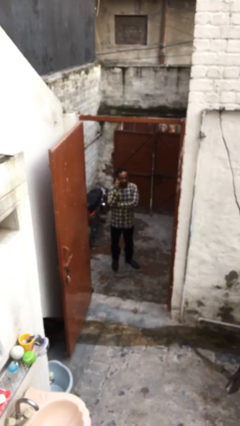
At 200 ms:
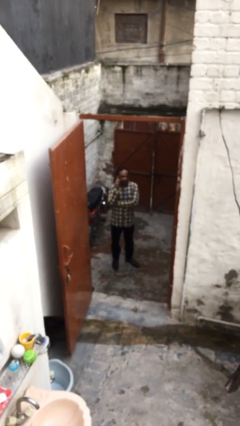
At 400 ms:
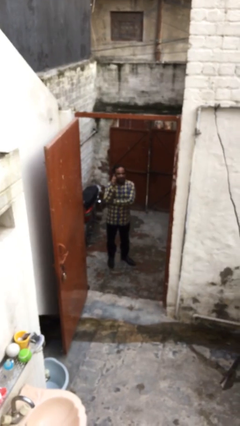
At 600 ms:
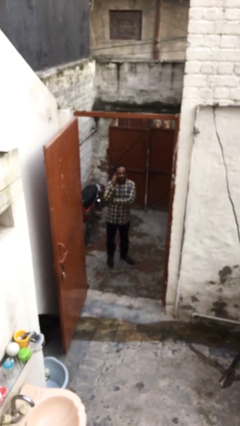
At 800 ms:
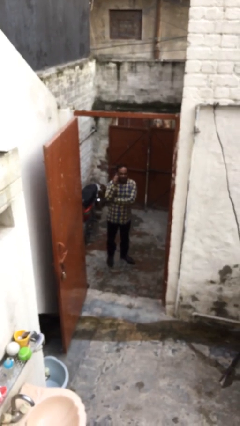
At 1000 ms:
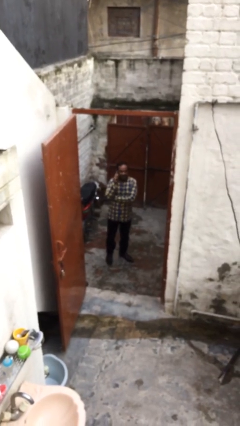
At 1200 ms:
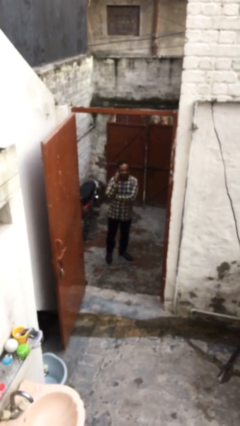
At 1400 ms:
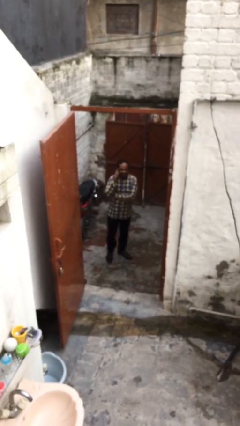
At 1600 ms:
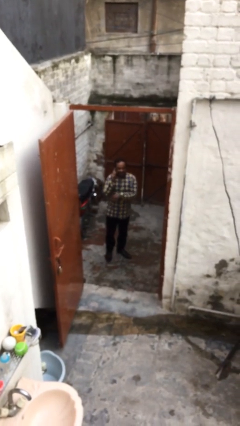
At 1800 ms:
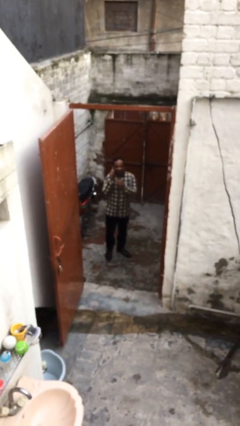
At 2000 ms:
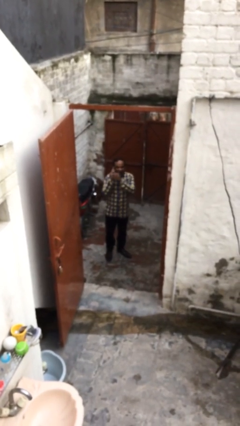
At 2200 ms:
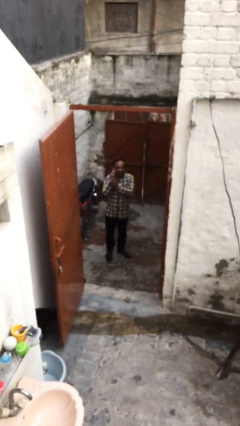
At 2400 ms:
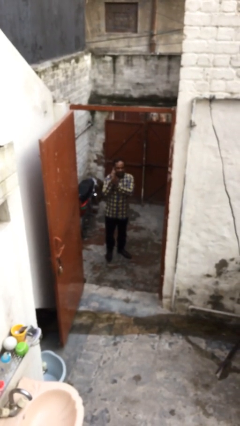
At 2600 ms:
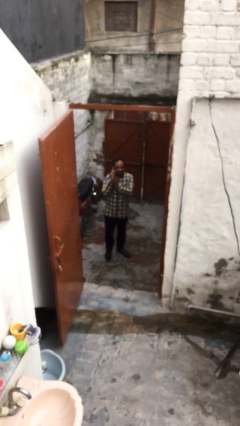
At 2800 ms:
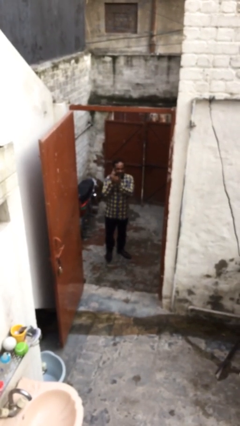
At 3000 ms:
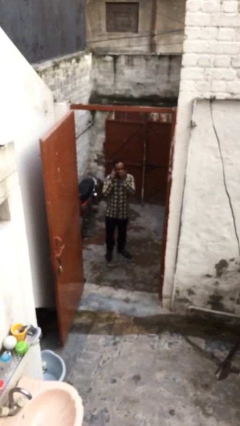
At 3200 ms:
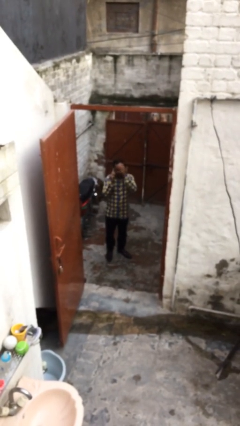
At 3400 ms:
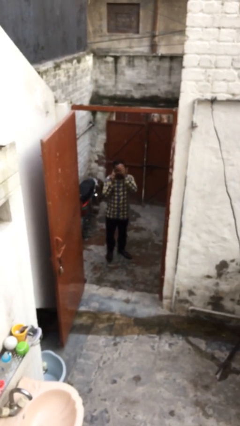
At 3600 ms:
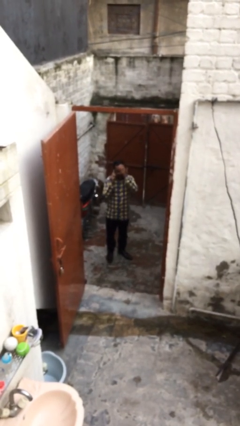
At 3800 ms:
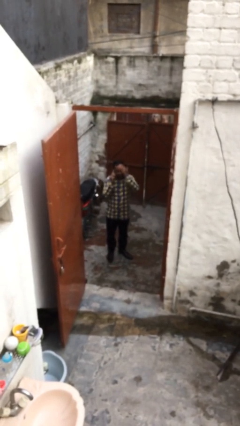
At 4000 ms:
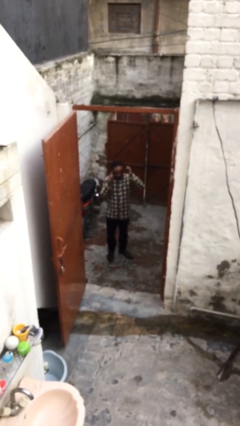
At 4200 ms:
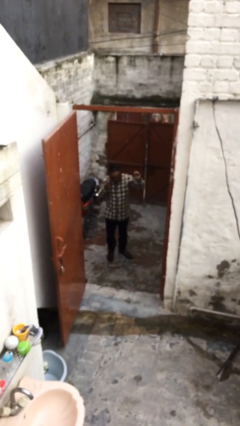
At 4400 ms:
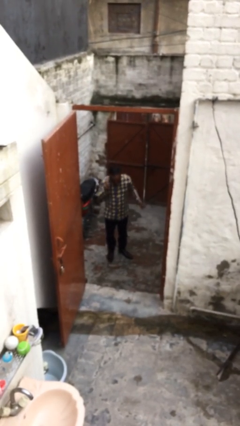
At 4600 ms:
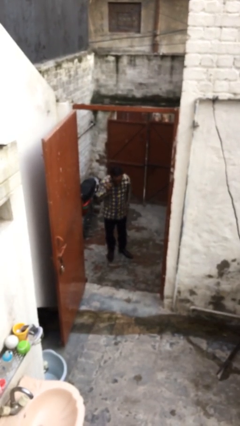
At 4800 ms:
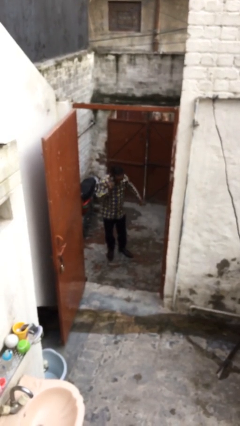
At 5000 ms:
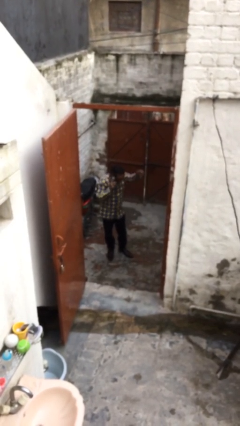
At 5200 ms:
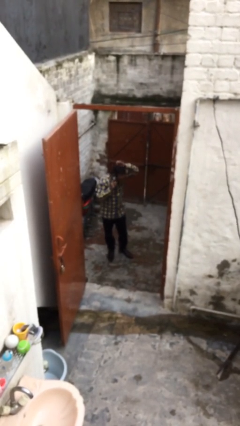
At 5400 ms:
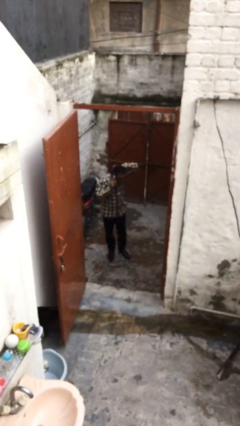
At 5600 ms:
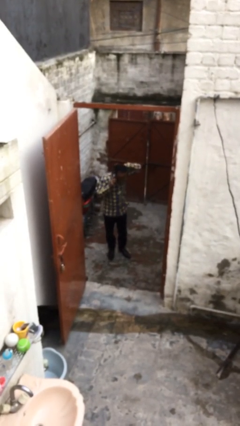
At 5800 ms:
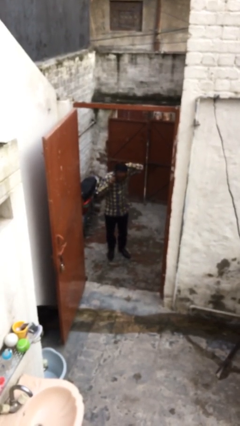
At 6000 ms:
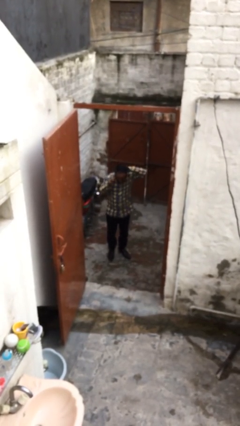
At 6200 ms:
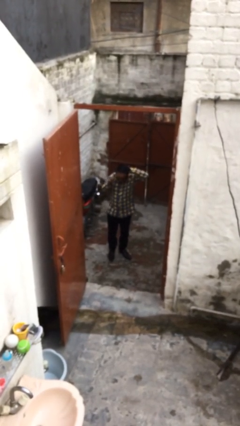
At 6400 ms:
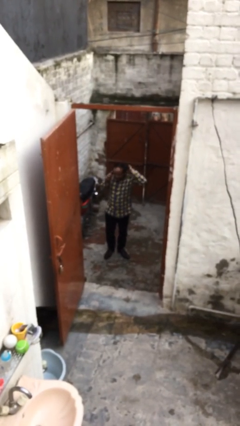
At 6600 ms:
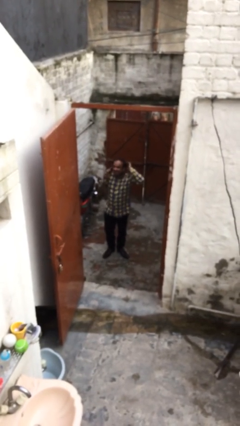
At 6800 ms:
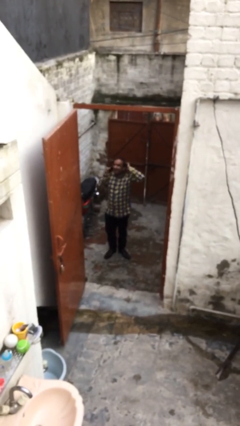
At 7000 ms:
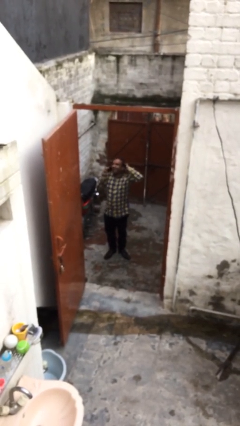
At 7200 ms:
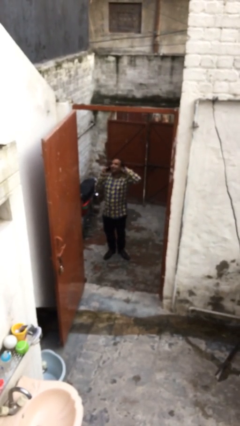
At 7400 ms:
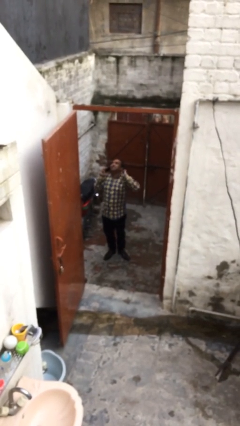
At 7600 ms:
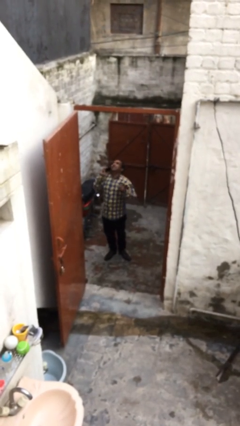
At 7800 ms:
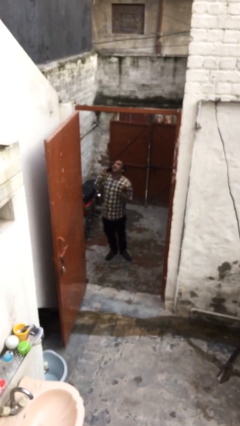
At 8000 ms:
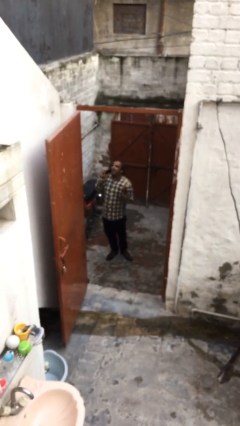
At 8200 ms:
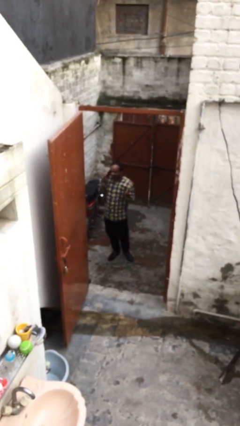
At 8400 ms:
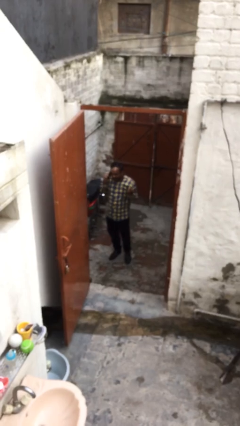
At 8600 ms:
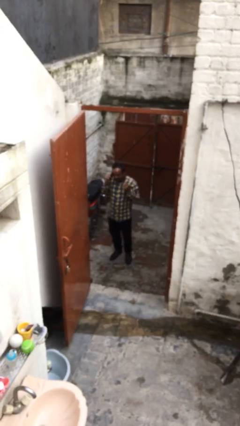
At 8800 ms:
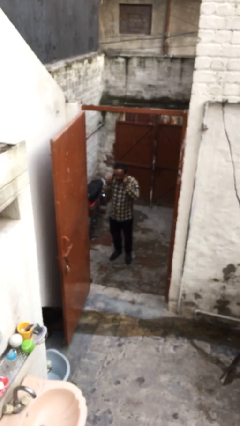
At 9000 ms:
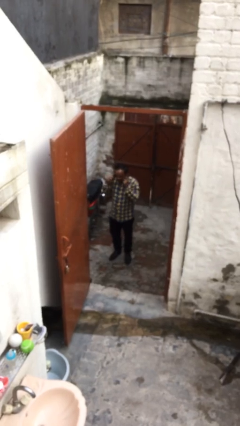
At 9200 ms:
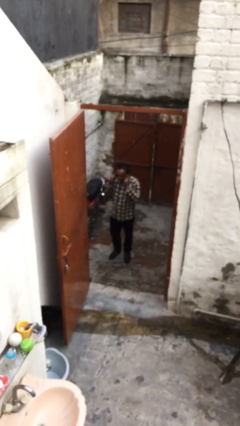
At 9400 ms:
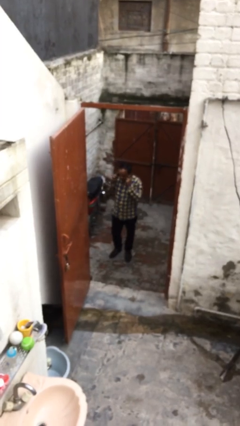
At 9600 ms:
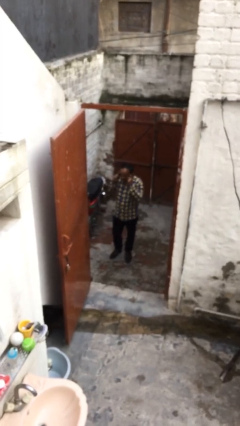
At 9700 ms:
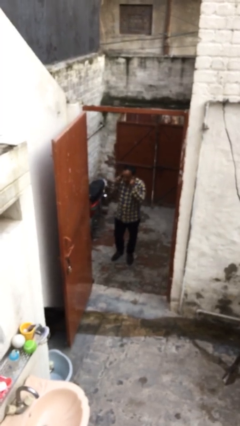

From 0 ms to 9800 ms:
person talks on phone

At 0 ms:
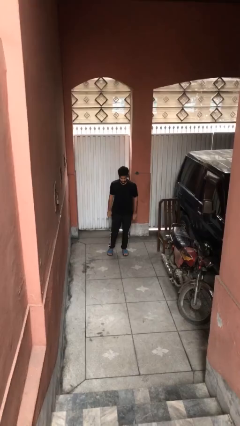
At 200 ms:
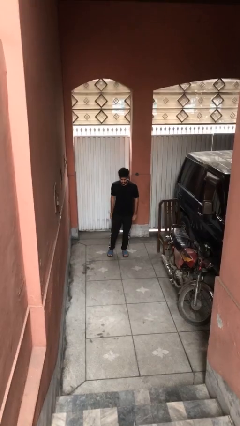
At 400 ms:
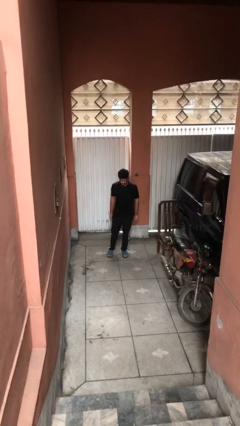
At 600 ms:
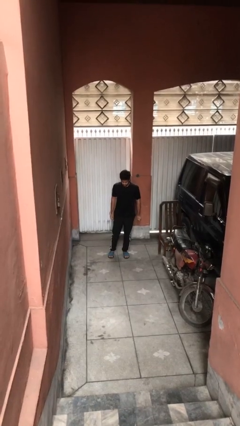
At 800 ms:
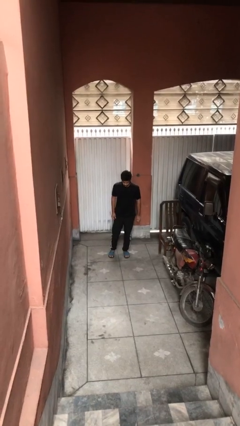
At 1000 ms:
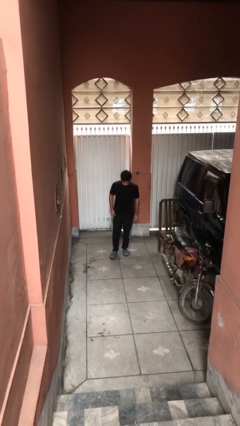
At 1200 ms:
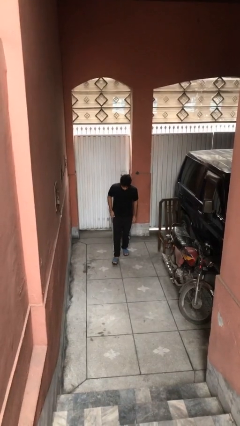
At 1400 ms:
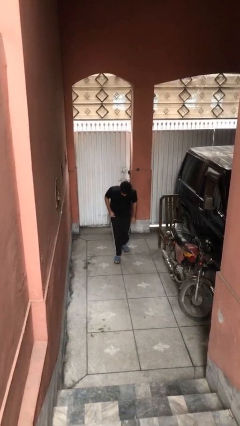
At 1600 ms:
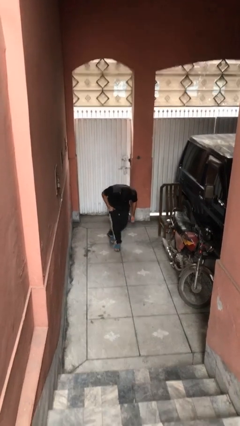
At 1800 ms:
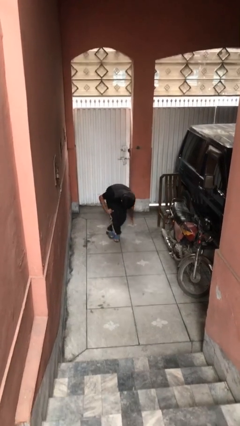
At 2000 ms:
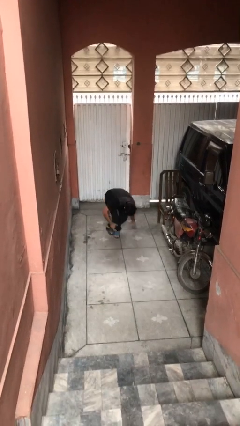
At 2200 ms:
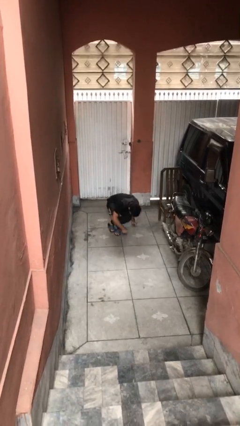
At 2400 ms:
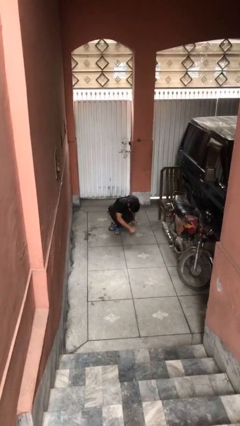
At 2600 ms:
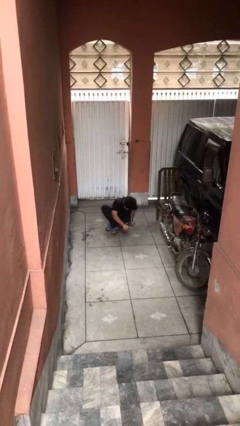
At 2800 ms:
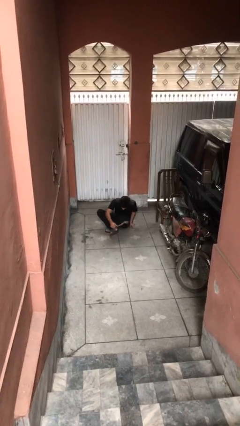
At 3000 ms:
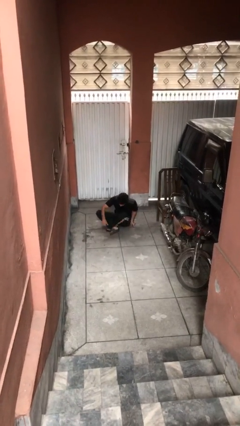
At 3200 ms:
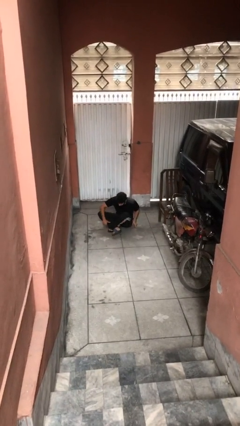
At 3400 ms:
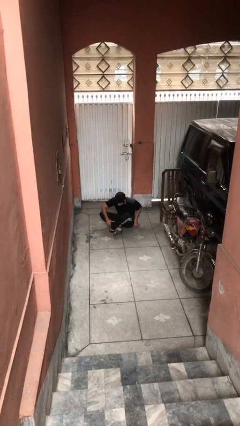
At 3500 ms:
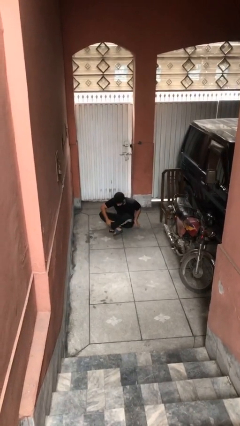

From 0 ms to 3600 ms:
person sits down

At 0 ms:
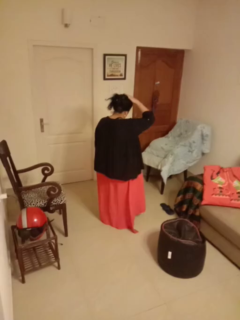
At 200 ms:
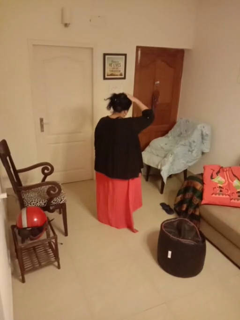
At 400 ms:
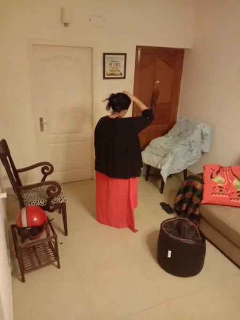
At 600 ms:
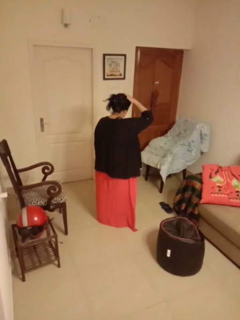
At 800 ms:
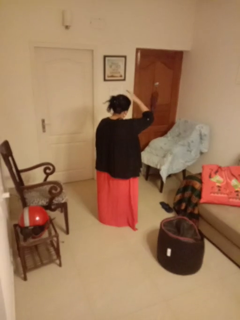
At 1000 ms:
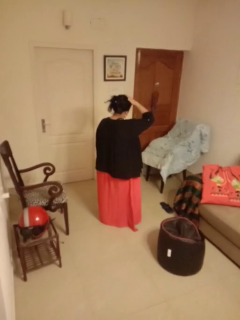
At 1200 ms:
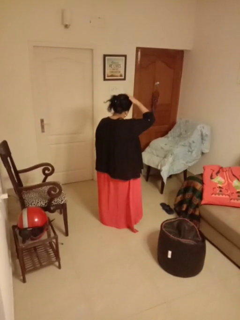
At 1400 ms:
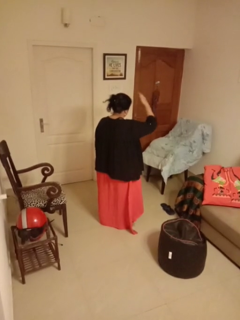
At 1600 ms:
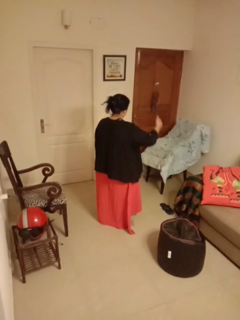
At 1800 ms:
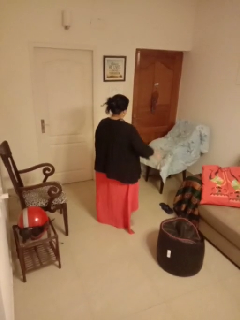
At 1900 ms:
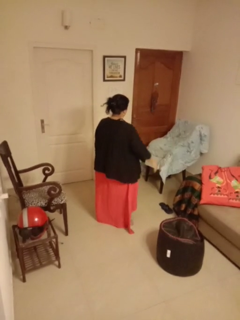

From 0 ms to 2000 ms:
person pats head

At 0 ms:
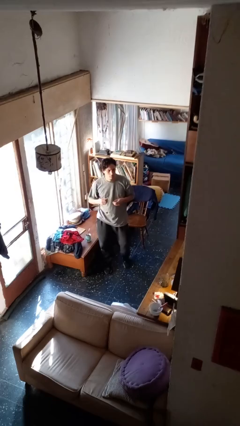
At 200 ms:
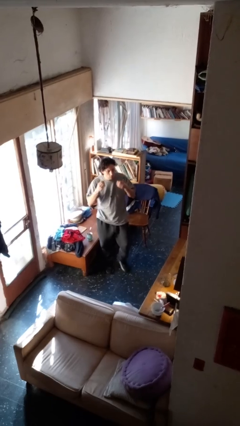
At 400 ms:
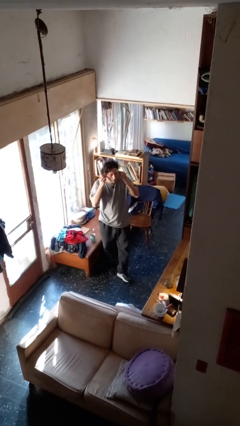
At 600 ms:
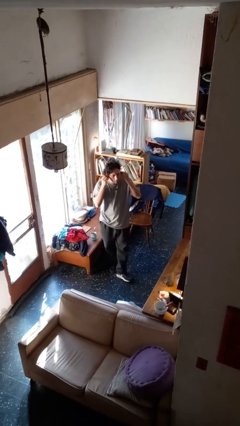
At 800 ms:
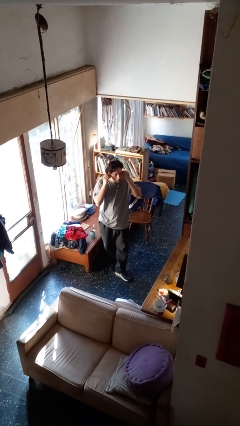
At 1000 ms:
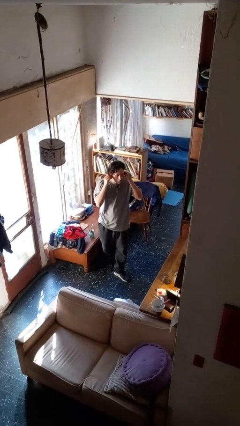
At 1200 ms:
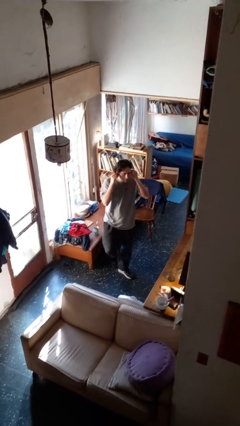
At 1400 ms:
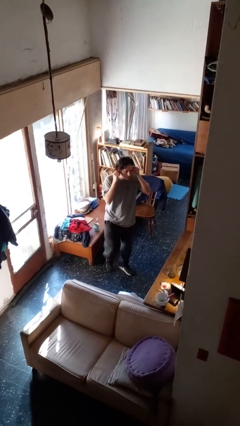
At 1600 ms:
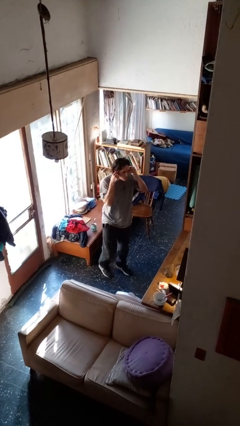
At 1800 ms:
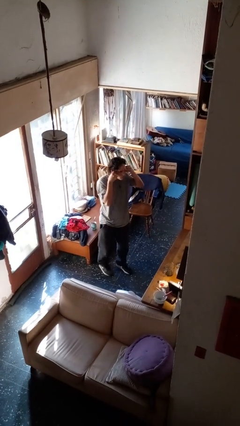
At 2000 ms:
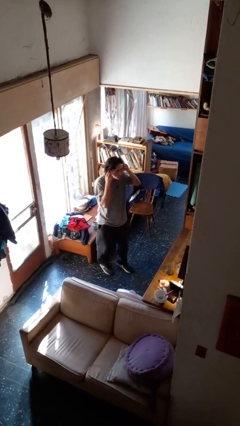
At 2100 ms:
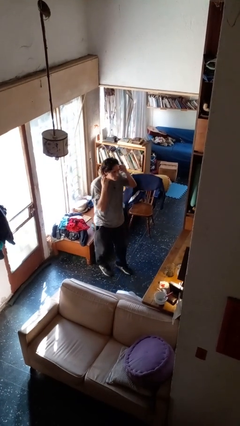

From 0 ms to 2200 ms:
person puts on headphones

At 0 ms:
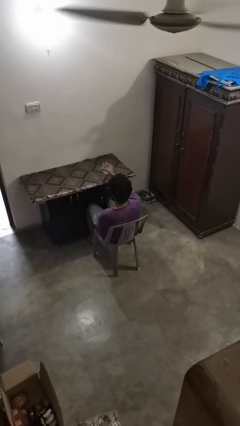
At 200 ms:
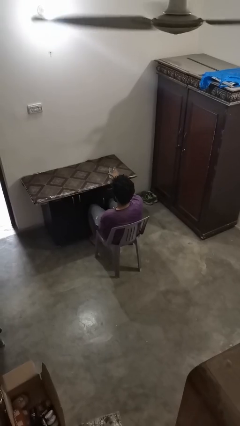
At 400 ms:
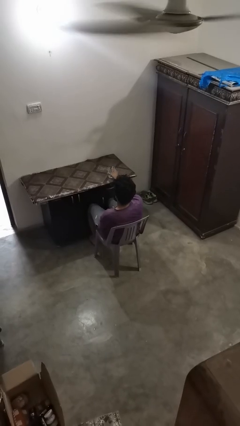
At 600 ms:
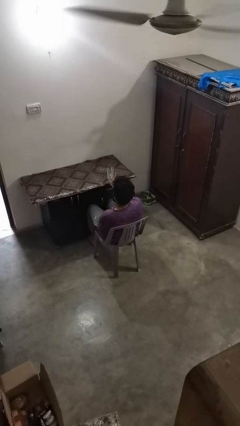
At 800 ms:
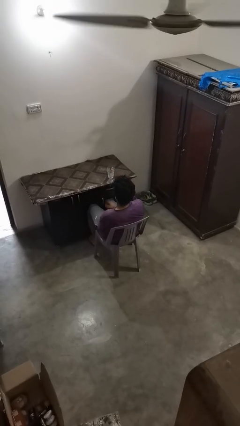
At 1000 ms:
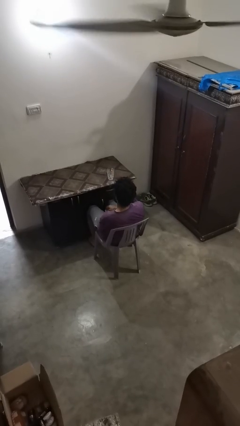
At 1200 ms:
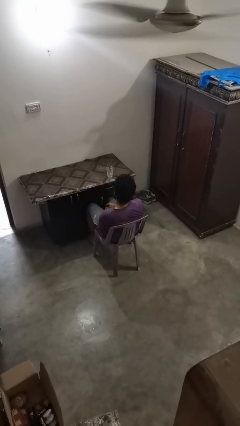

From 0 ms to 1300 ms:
person sets upright glass
